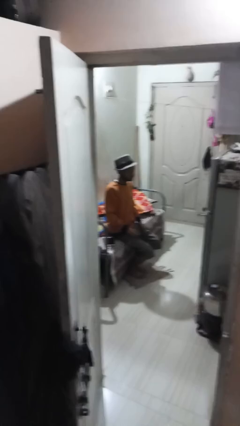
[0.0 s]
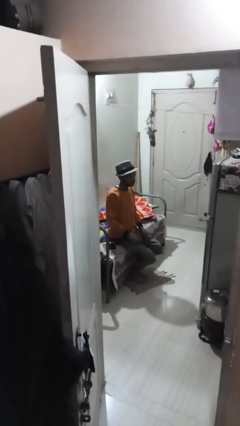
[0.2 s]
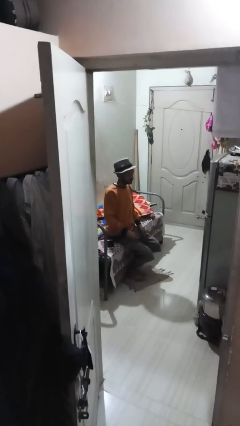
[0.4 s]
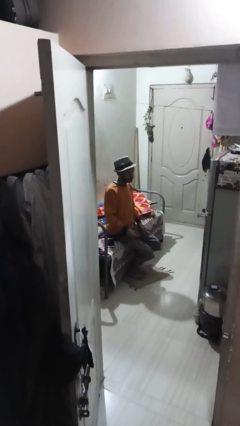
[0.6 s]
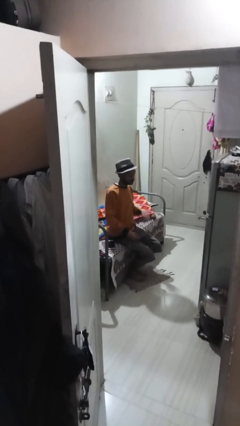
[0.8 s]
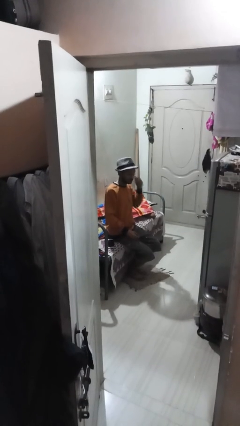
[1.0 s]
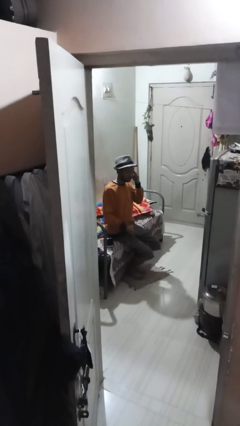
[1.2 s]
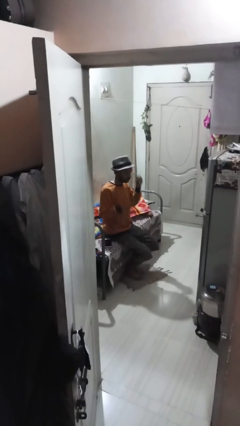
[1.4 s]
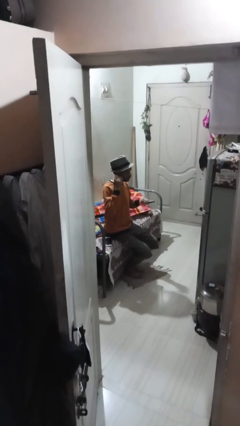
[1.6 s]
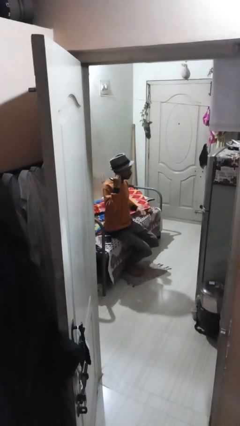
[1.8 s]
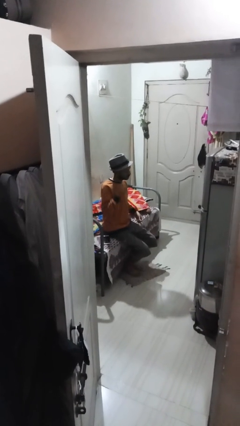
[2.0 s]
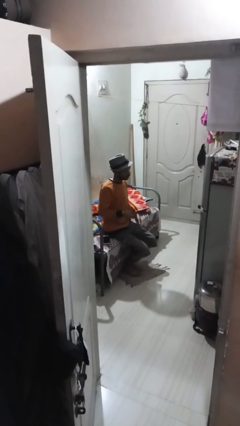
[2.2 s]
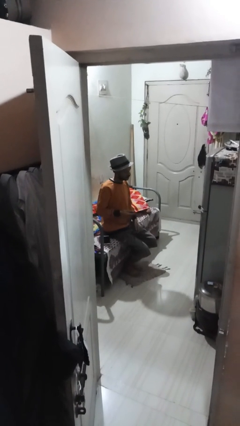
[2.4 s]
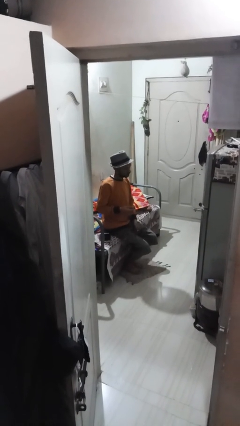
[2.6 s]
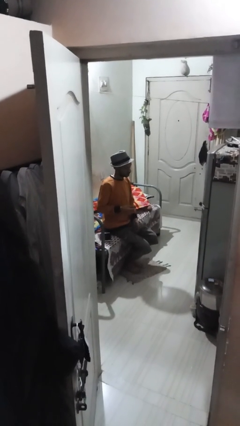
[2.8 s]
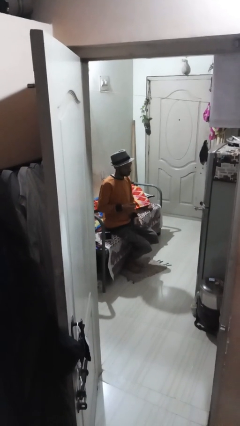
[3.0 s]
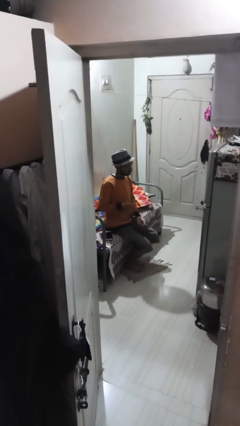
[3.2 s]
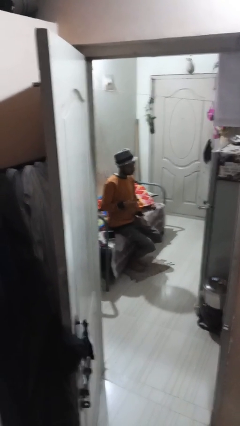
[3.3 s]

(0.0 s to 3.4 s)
person takes off headphones

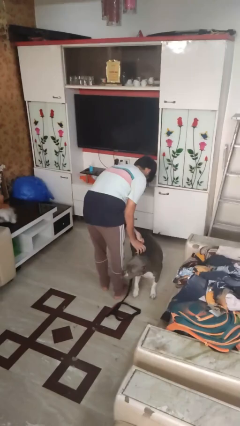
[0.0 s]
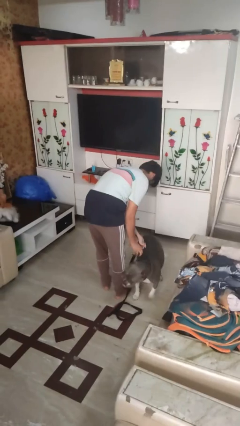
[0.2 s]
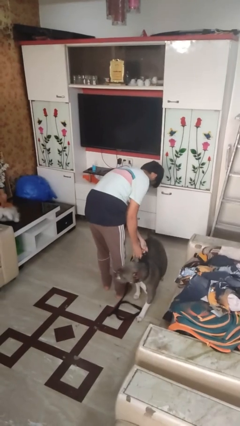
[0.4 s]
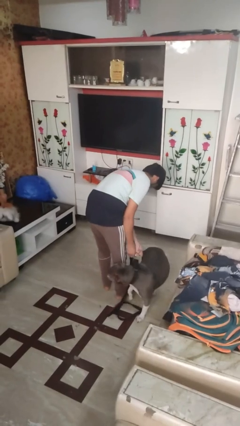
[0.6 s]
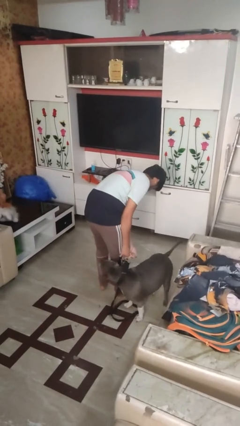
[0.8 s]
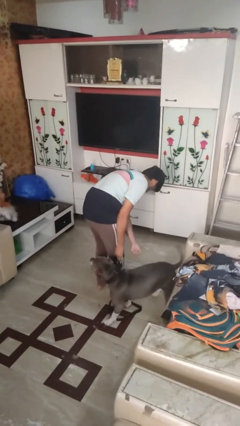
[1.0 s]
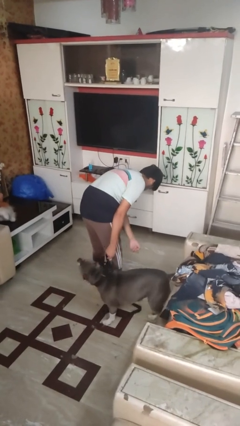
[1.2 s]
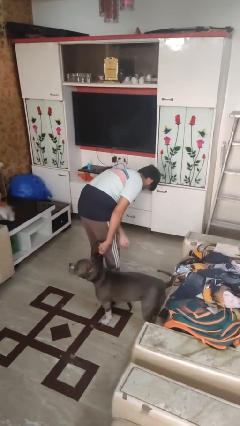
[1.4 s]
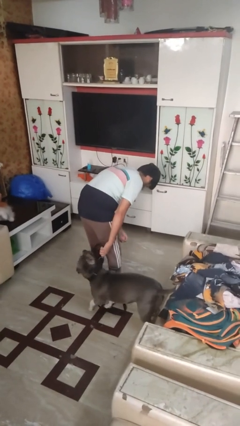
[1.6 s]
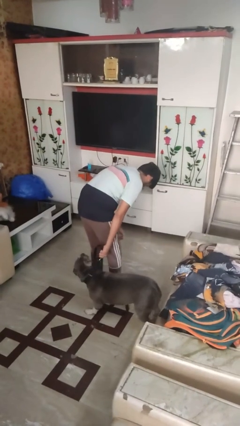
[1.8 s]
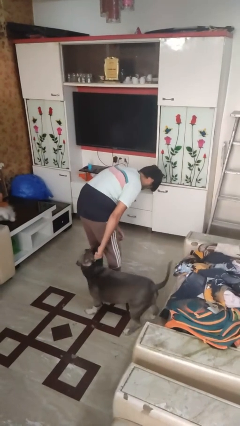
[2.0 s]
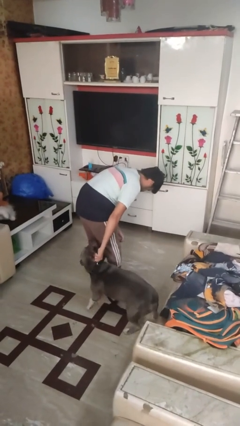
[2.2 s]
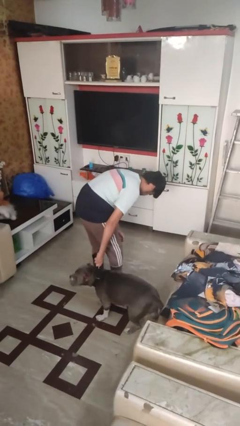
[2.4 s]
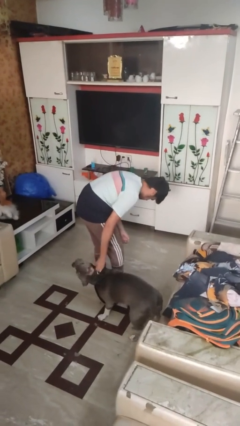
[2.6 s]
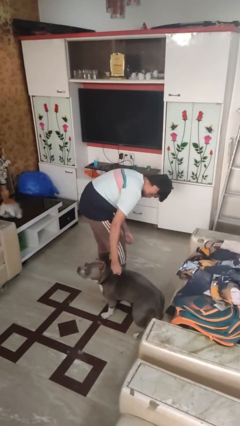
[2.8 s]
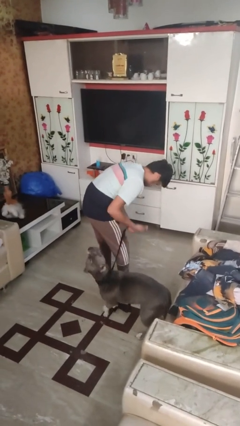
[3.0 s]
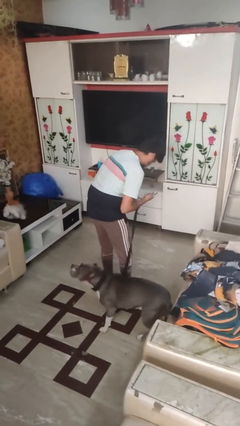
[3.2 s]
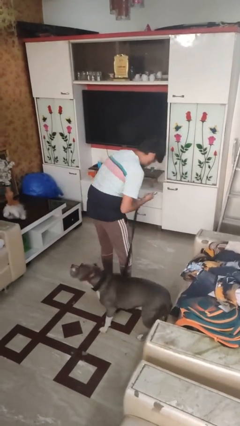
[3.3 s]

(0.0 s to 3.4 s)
person unattaches leash from dog

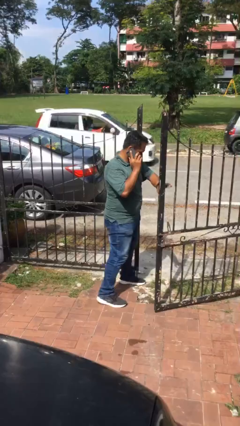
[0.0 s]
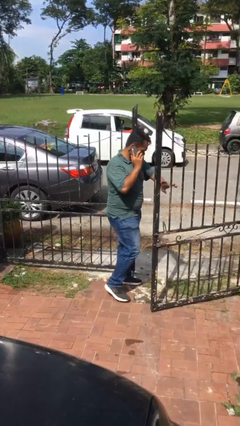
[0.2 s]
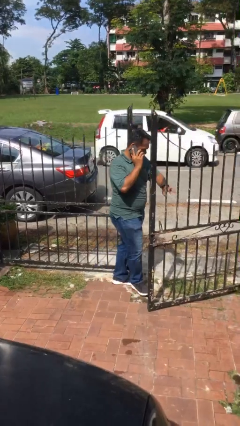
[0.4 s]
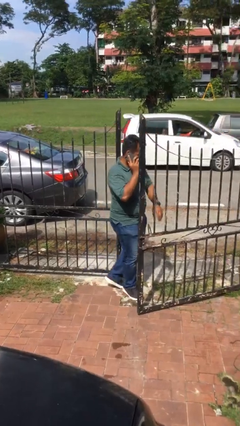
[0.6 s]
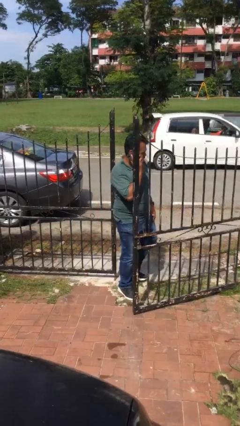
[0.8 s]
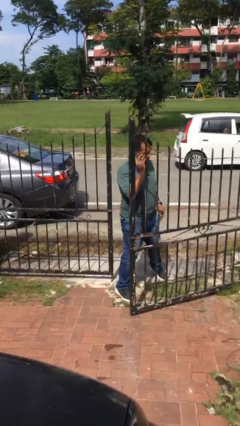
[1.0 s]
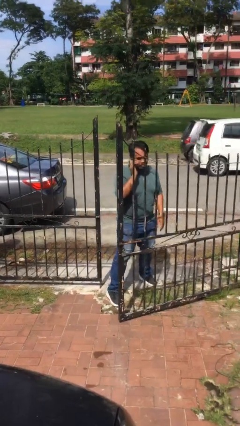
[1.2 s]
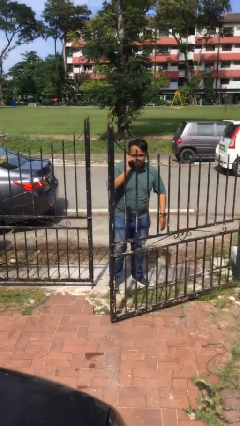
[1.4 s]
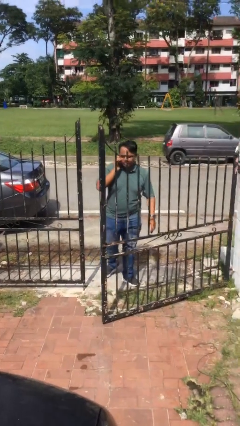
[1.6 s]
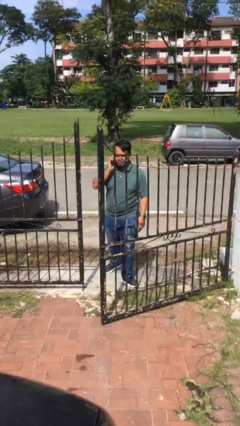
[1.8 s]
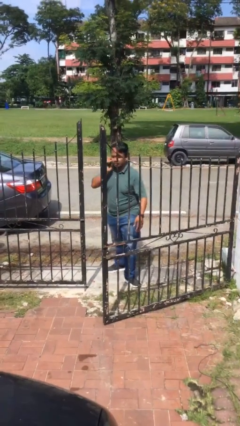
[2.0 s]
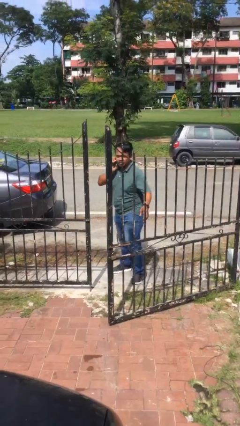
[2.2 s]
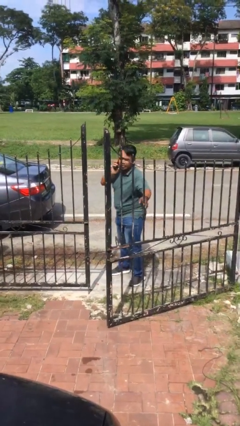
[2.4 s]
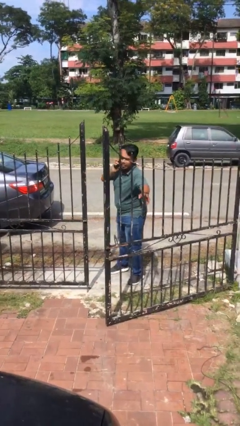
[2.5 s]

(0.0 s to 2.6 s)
person exits scene through structure

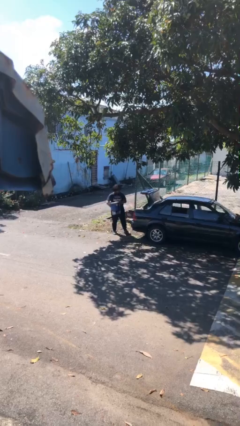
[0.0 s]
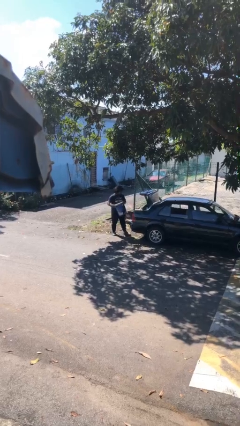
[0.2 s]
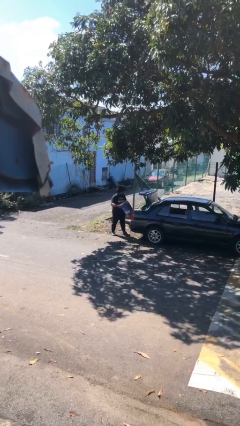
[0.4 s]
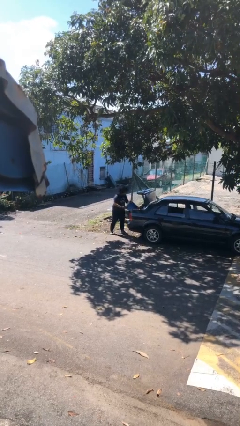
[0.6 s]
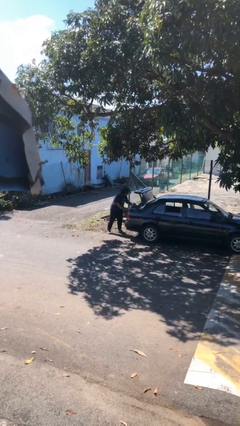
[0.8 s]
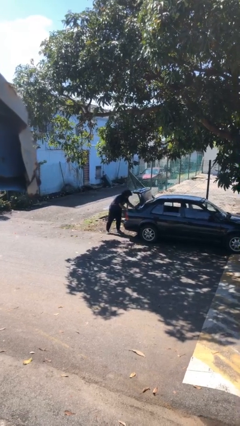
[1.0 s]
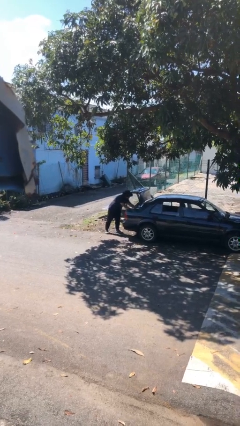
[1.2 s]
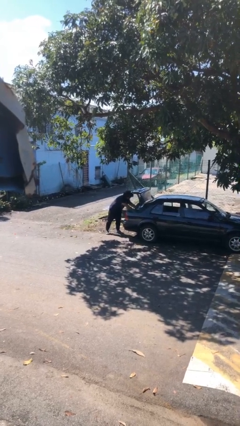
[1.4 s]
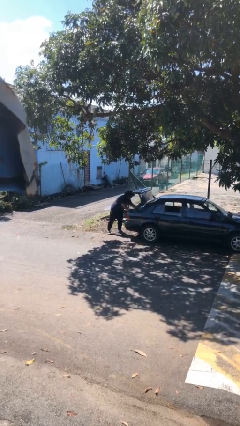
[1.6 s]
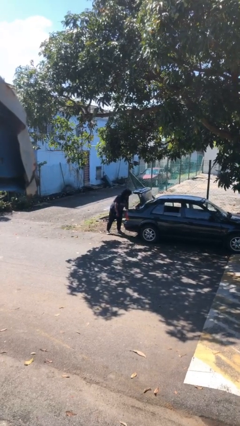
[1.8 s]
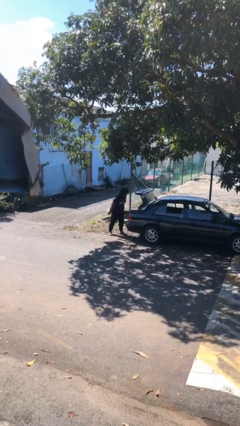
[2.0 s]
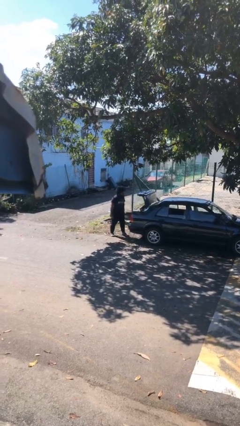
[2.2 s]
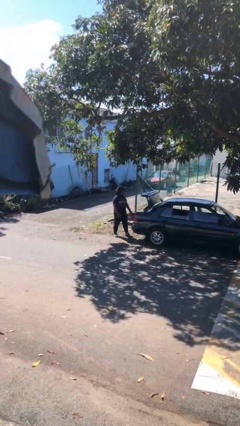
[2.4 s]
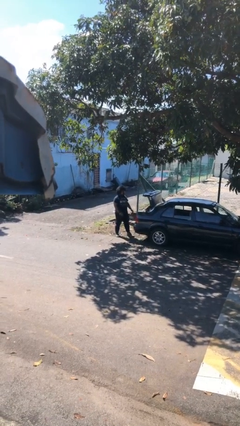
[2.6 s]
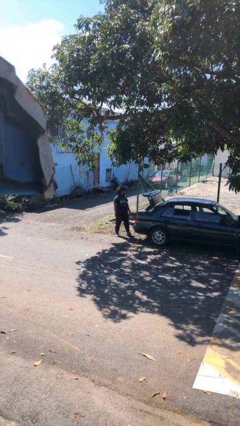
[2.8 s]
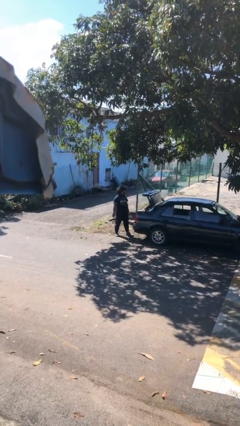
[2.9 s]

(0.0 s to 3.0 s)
person loads car

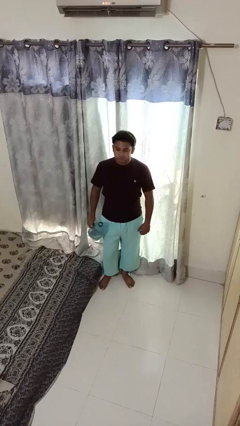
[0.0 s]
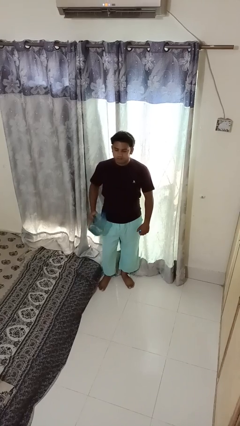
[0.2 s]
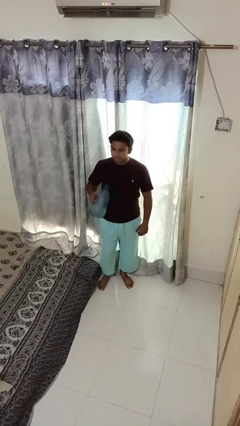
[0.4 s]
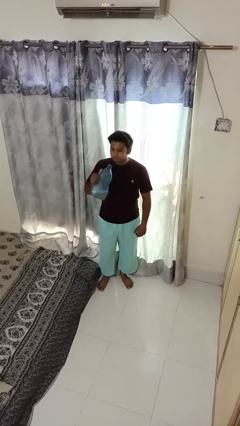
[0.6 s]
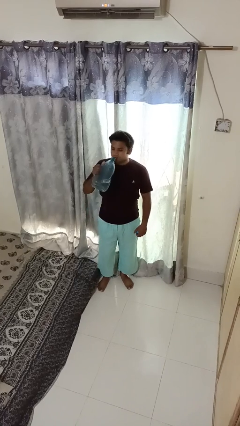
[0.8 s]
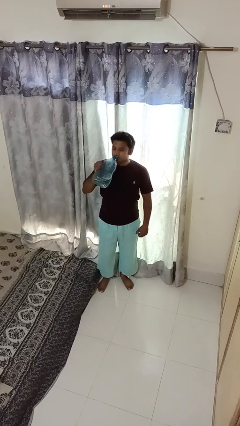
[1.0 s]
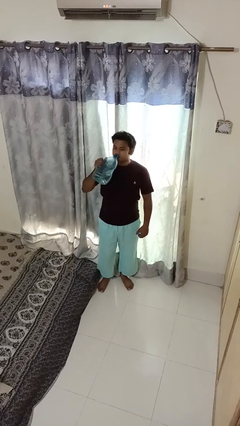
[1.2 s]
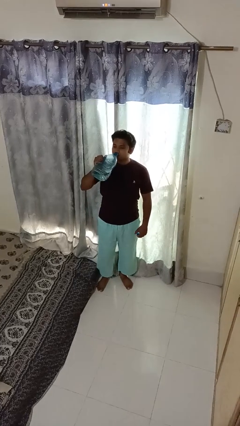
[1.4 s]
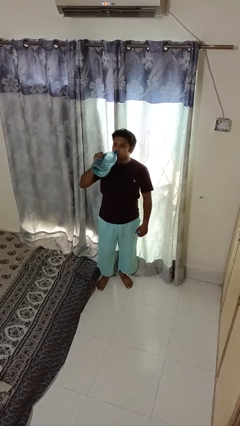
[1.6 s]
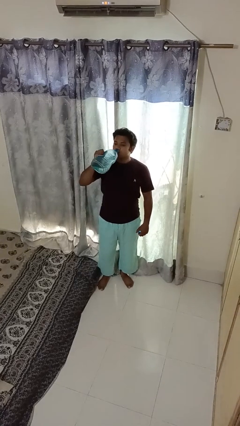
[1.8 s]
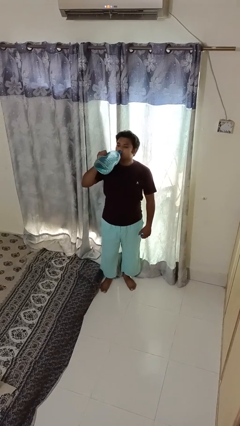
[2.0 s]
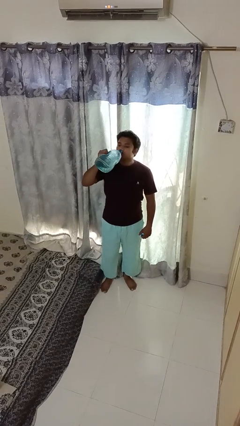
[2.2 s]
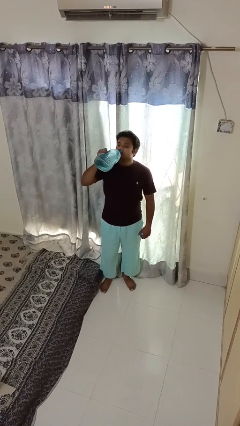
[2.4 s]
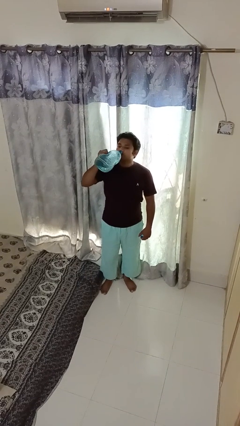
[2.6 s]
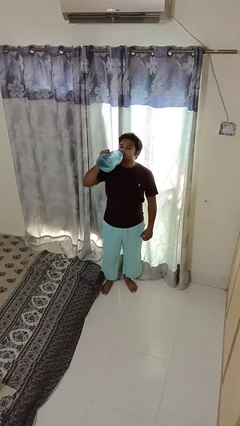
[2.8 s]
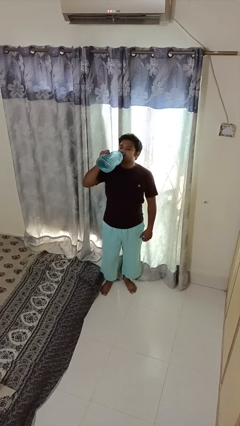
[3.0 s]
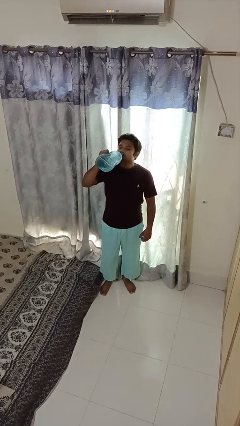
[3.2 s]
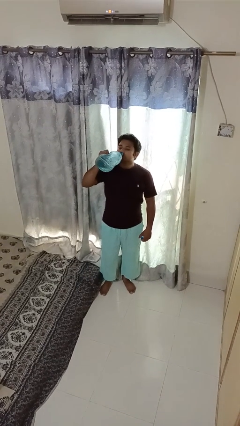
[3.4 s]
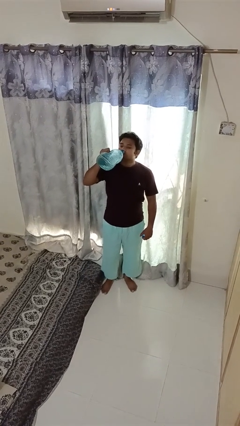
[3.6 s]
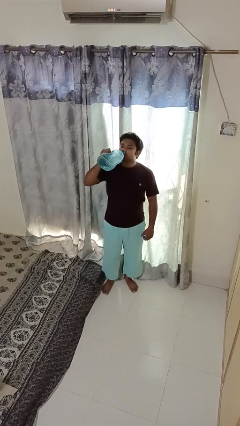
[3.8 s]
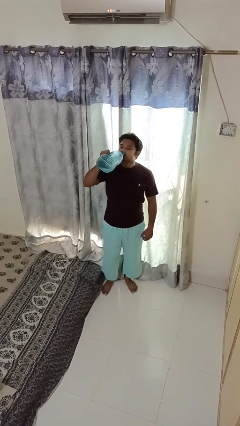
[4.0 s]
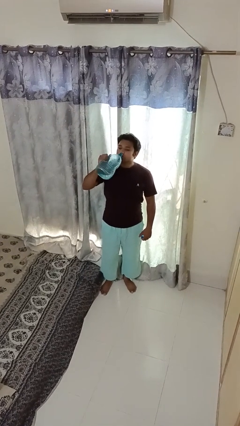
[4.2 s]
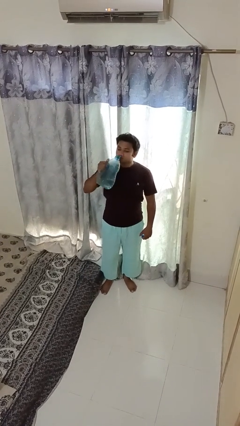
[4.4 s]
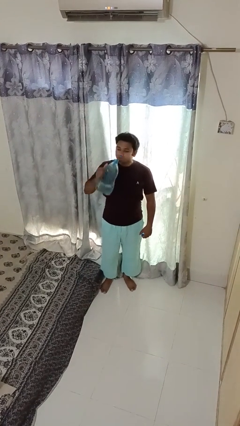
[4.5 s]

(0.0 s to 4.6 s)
person drinks from bottle

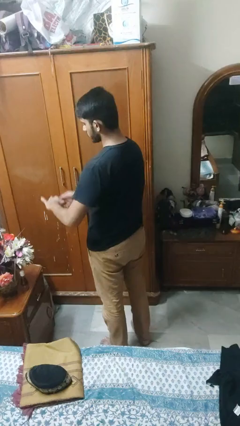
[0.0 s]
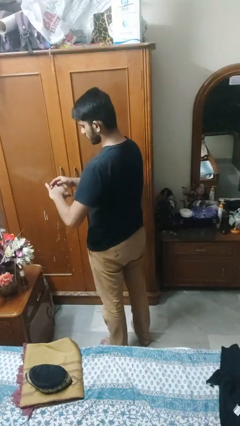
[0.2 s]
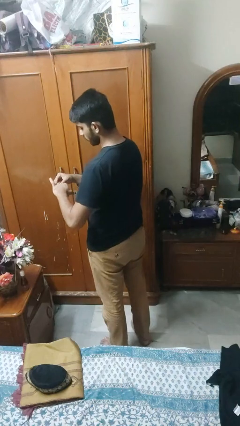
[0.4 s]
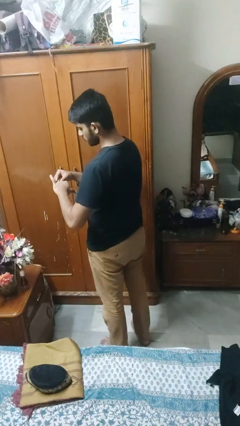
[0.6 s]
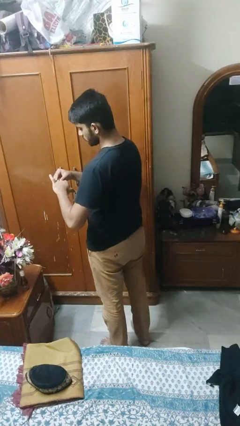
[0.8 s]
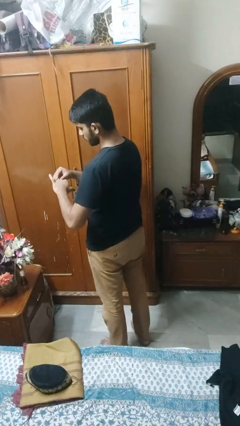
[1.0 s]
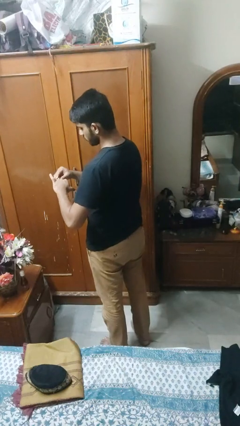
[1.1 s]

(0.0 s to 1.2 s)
person takes off ring
